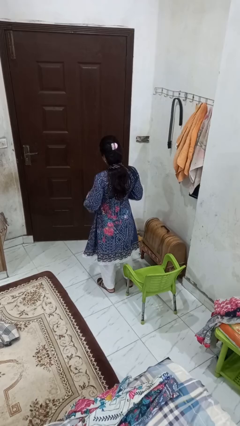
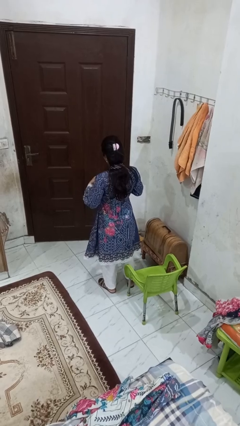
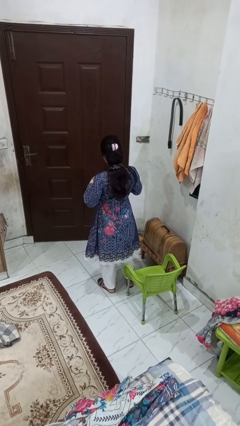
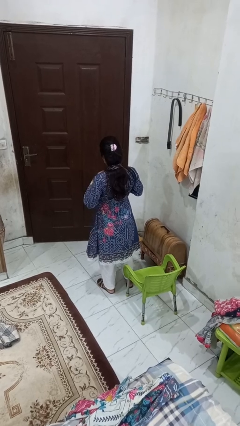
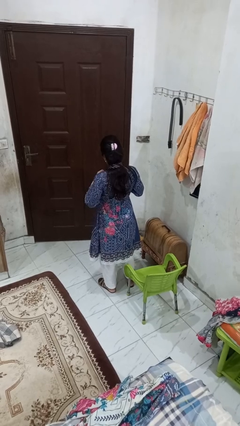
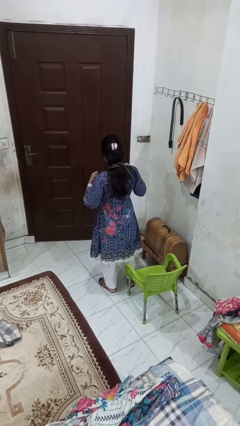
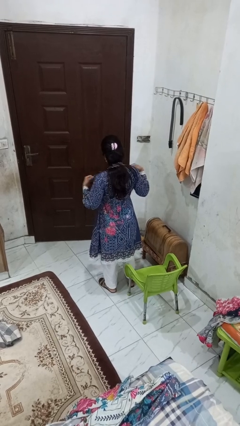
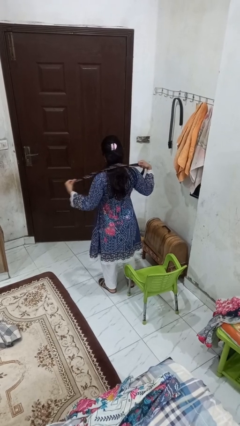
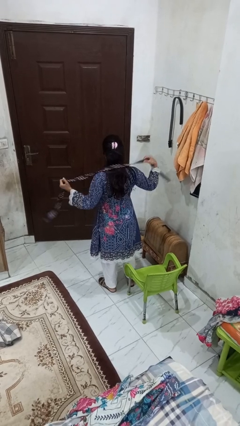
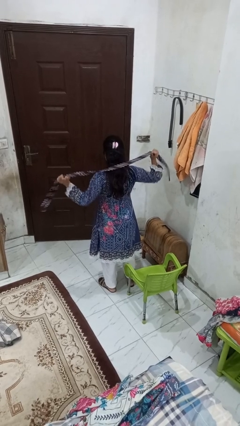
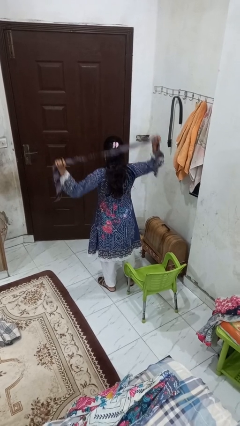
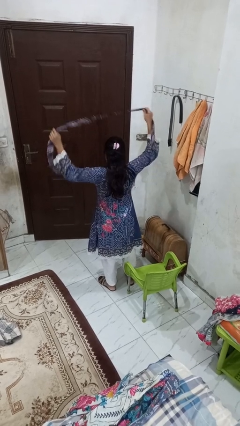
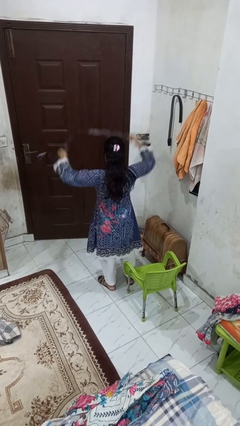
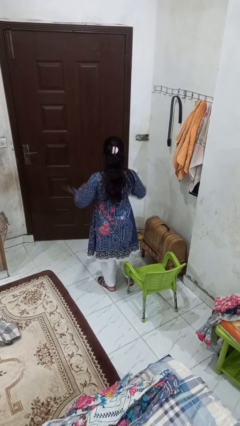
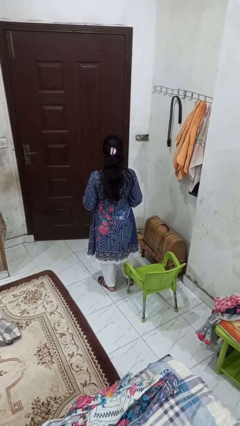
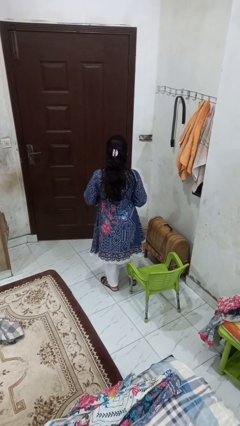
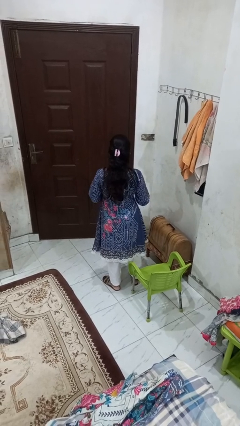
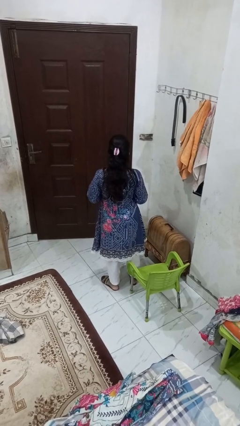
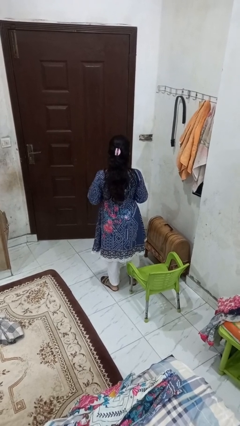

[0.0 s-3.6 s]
person takes off necktie

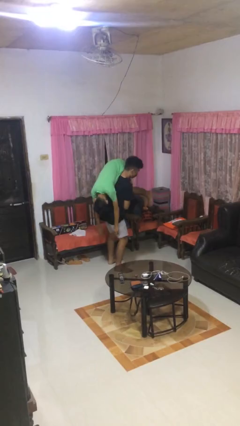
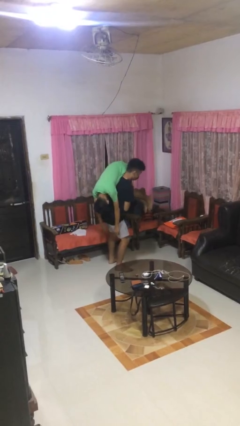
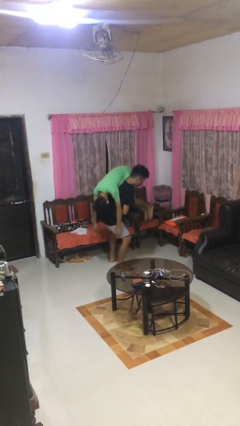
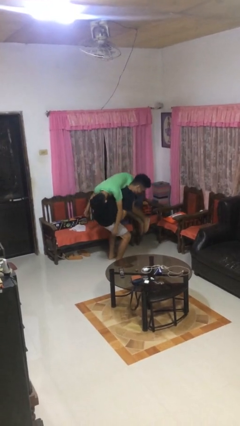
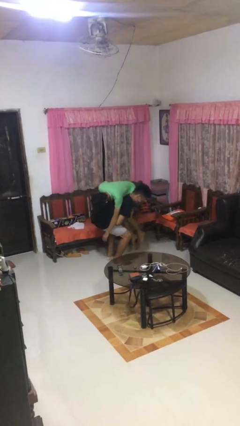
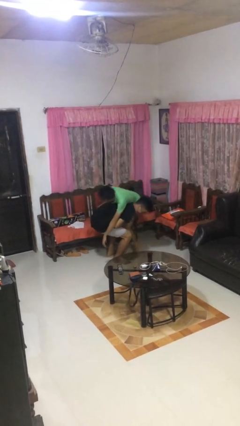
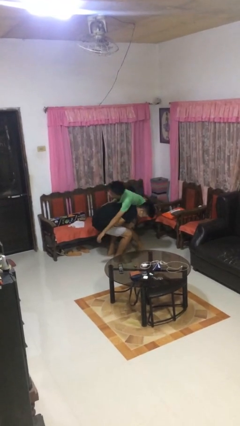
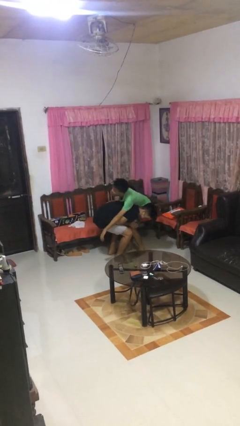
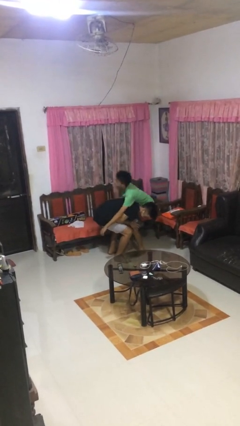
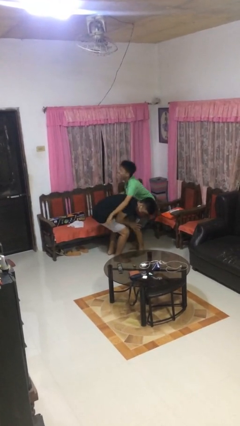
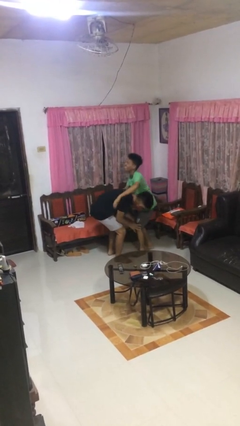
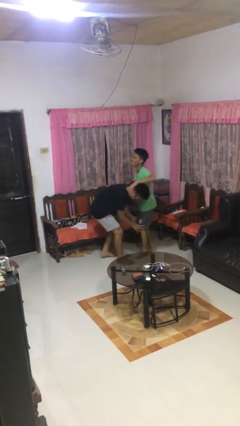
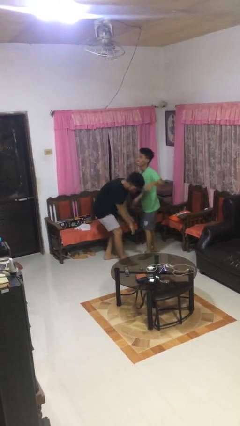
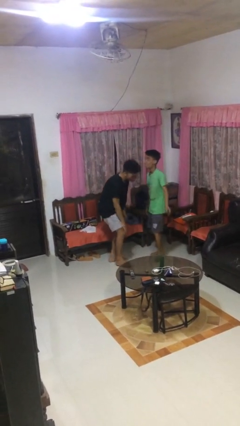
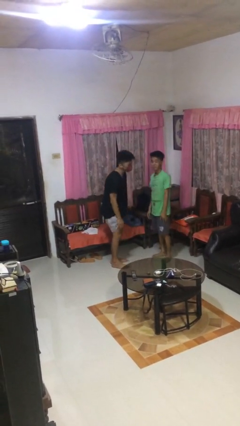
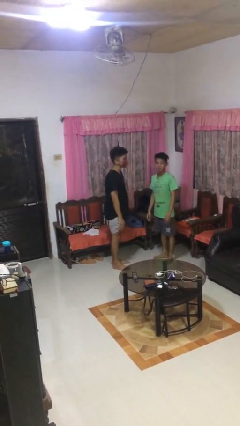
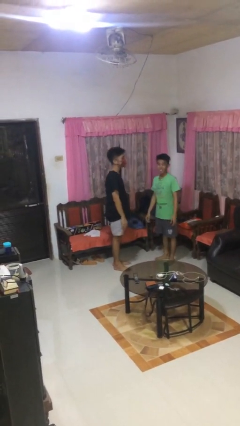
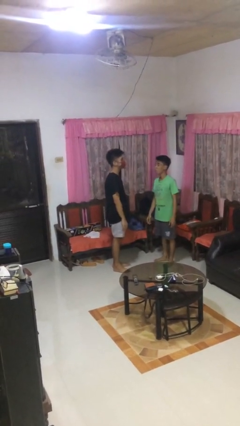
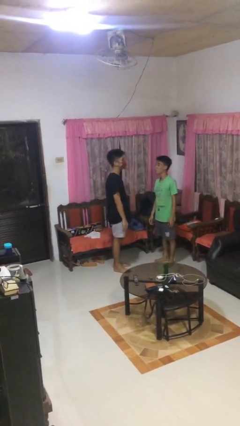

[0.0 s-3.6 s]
person puts down person

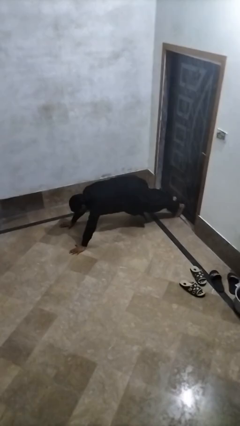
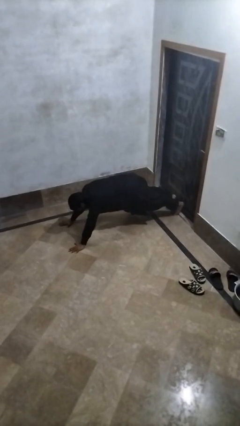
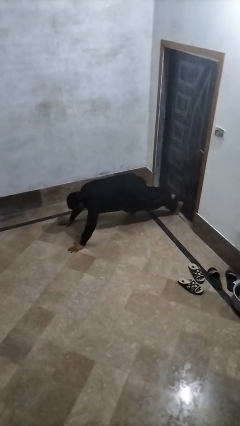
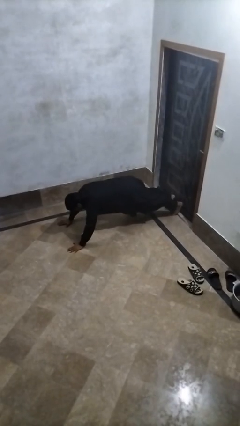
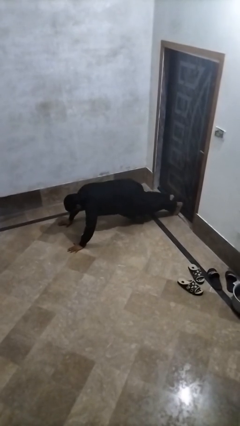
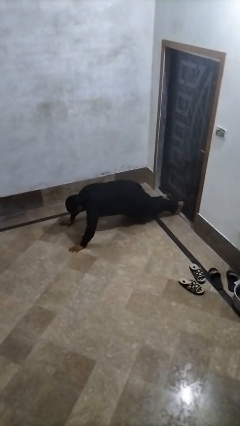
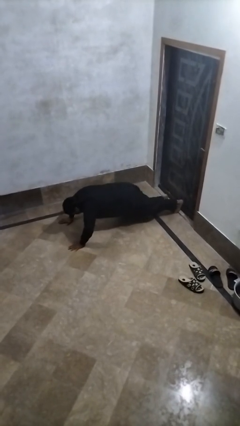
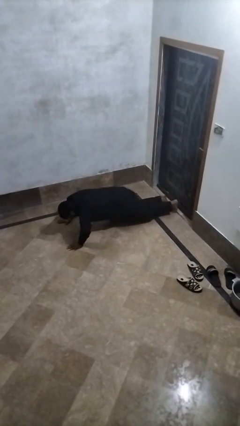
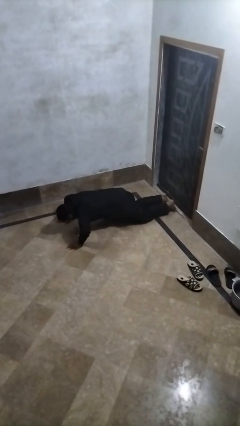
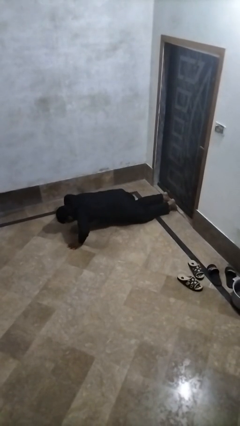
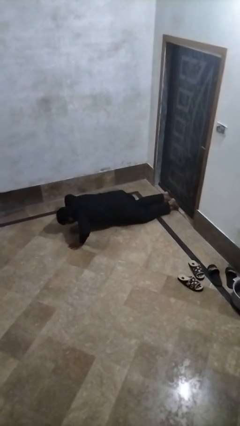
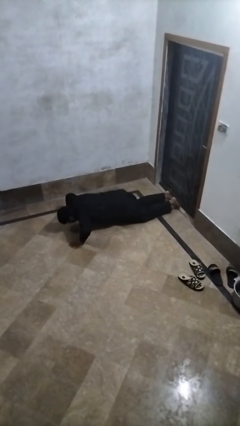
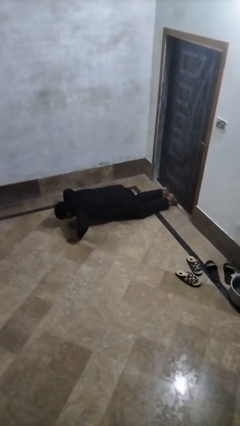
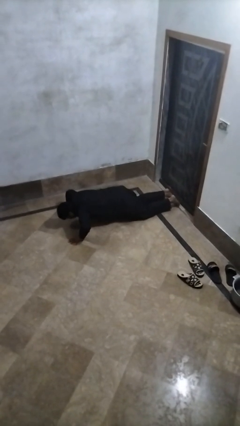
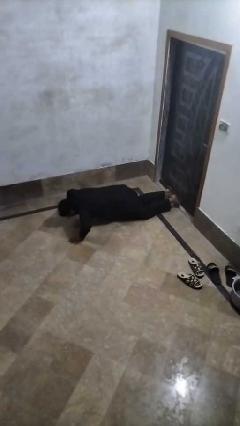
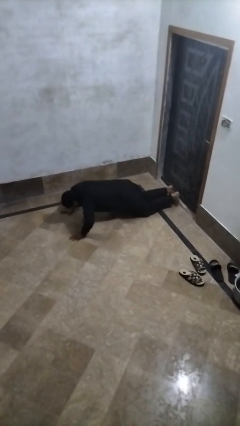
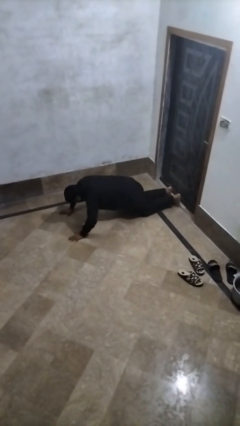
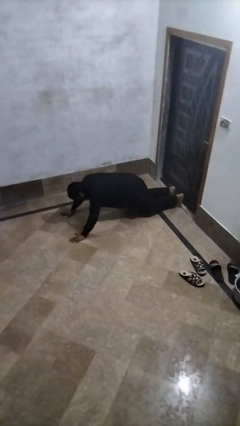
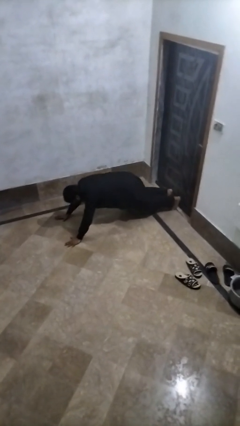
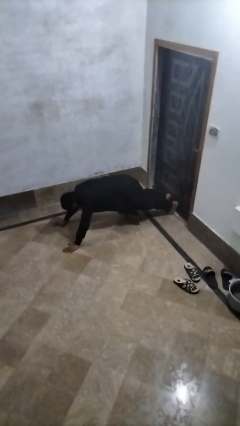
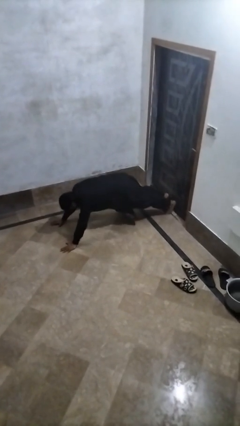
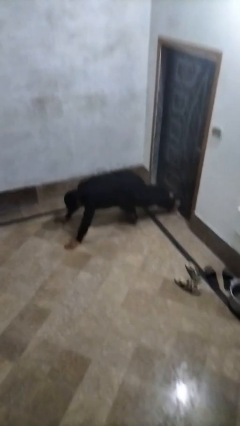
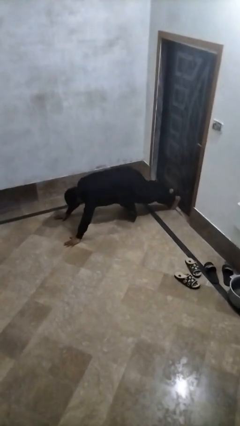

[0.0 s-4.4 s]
person exercises with pushup

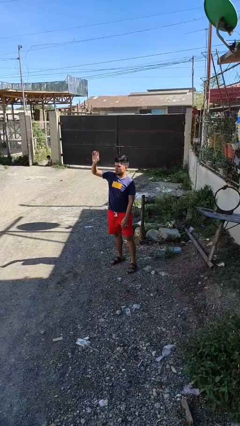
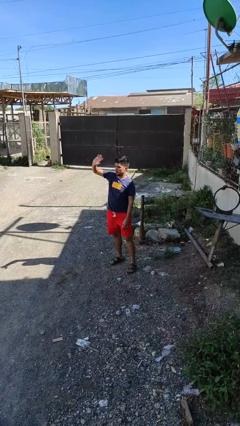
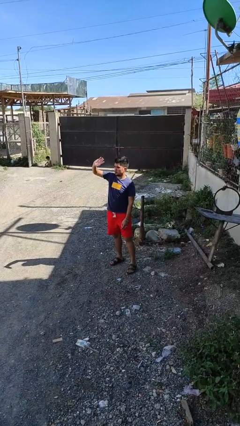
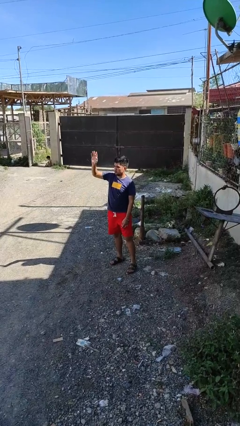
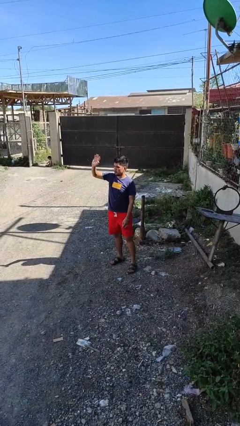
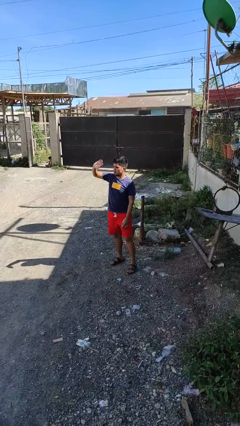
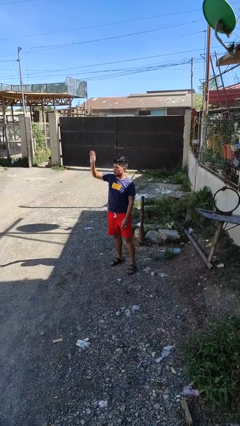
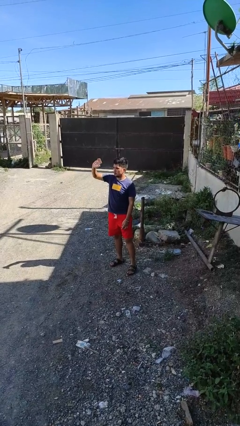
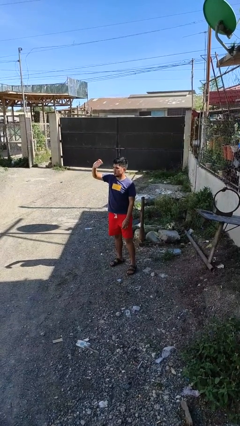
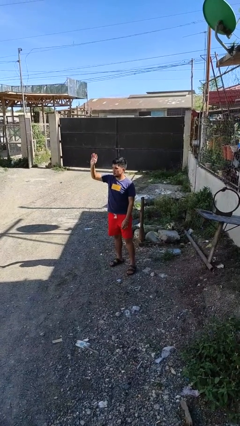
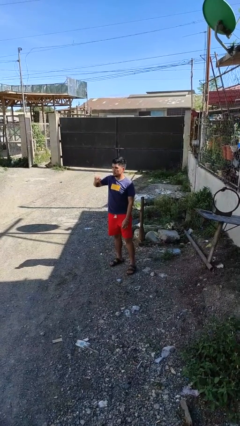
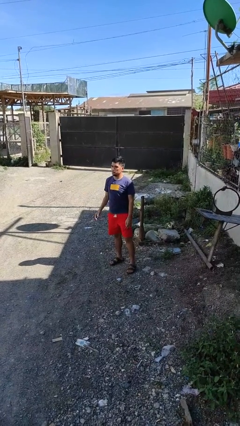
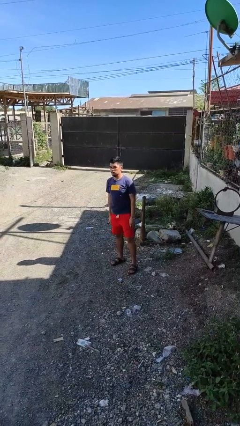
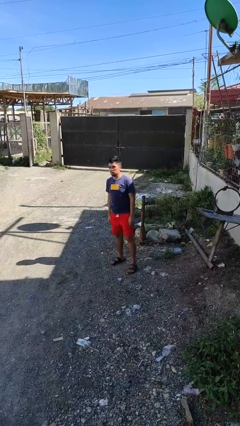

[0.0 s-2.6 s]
person waves at person

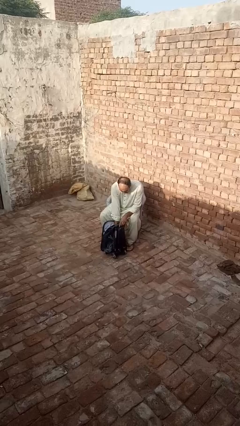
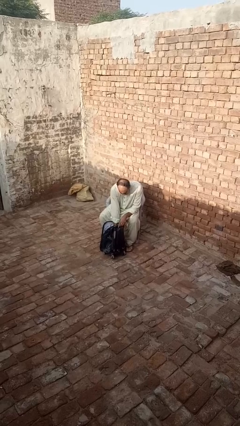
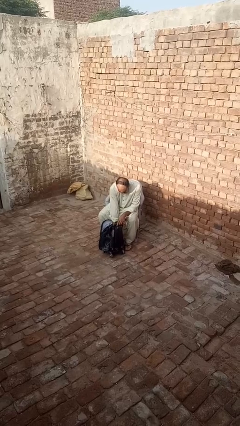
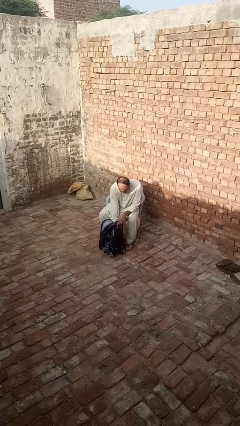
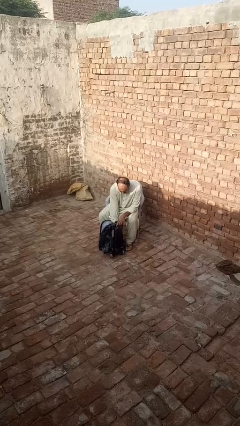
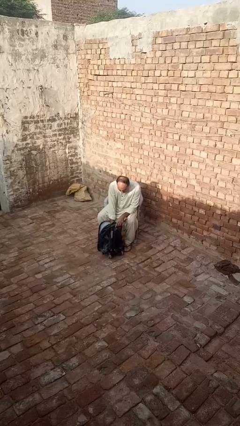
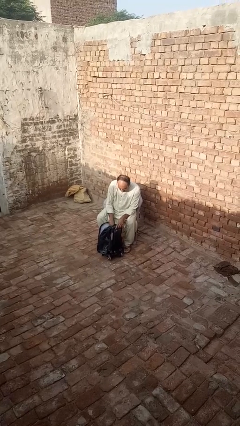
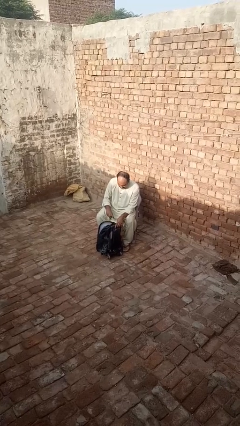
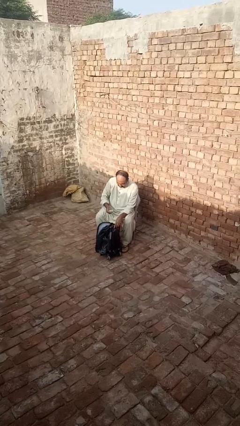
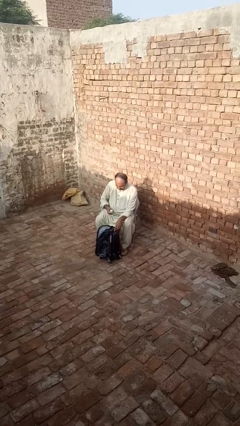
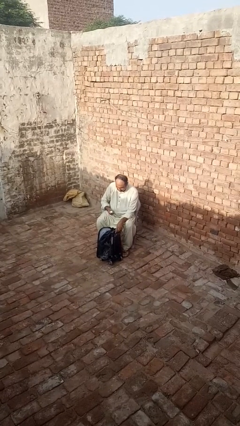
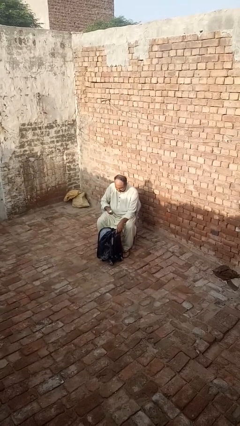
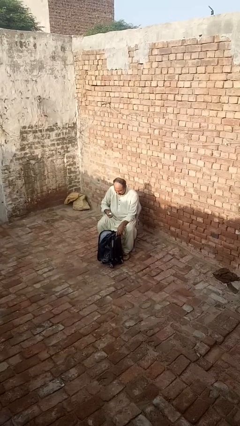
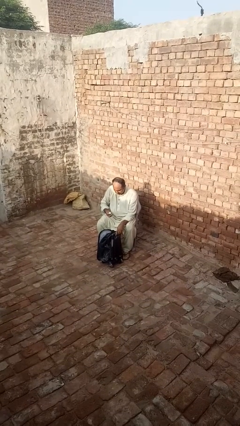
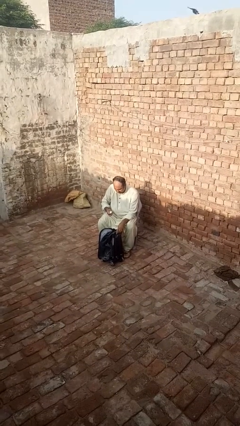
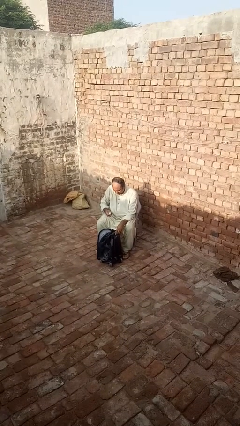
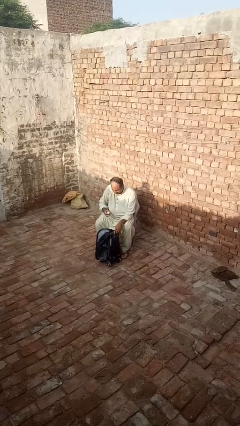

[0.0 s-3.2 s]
person takes object from backpack
